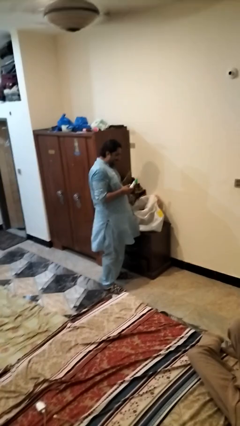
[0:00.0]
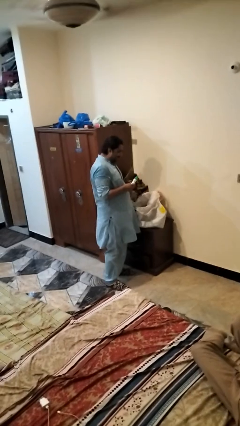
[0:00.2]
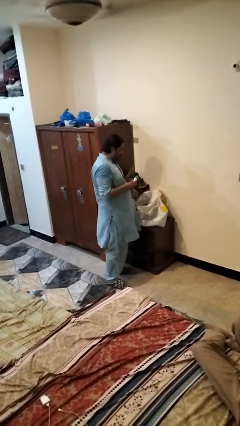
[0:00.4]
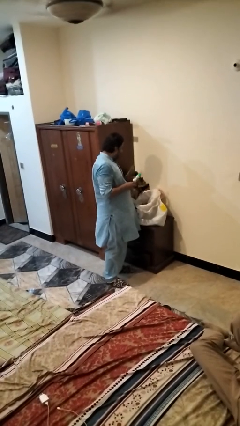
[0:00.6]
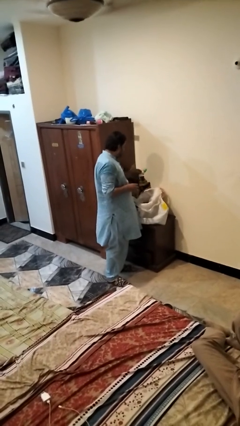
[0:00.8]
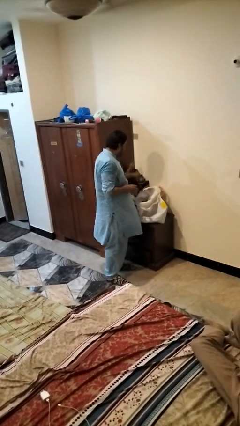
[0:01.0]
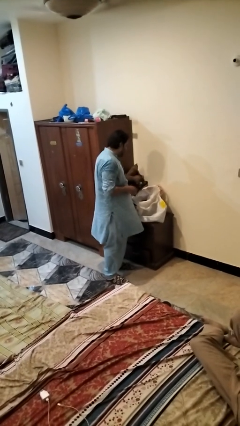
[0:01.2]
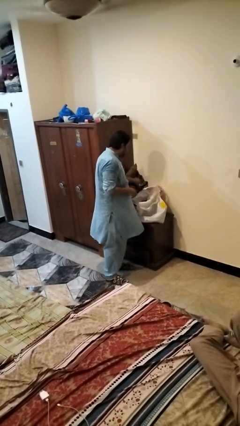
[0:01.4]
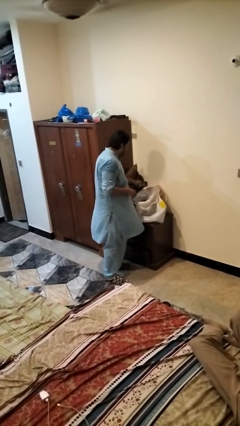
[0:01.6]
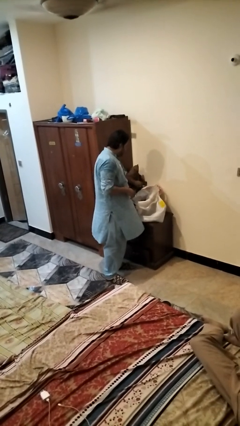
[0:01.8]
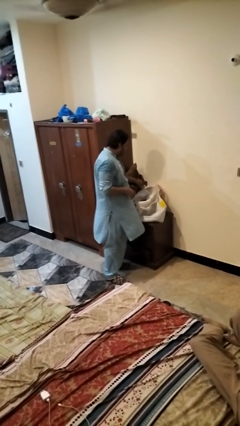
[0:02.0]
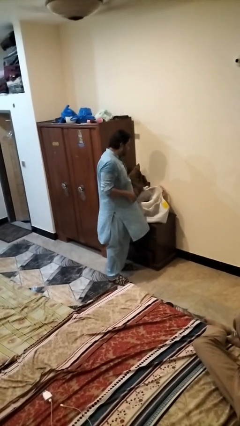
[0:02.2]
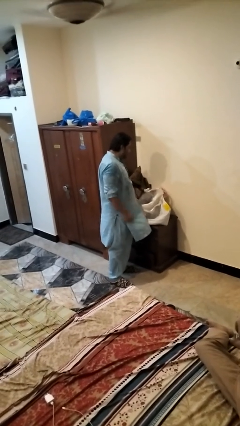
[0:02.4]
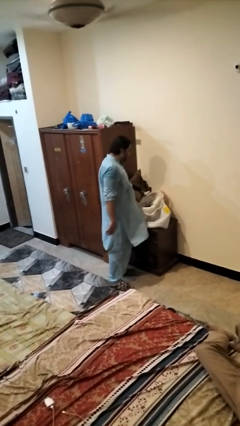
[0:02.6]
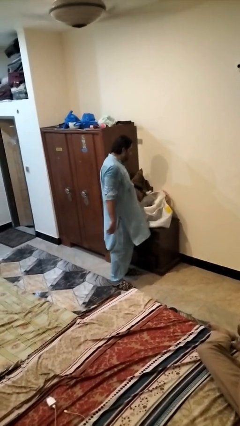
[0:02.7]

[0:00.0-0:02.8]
person puts object into bag

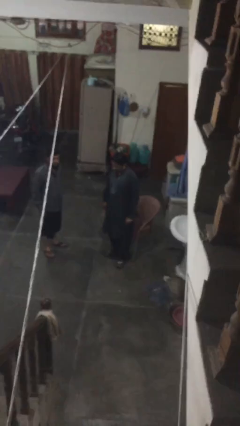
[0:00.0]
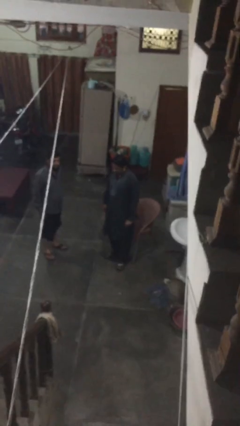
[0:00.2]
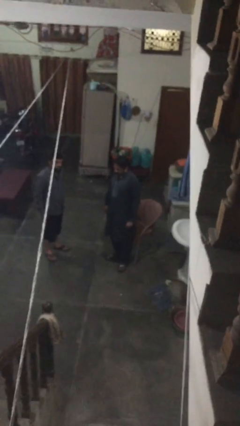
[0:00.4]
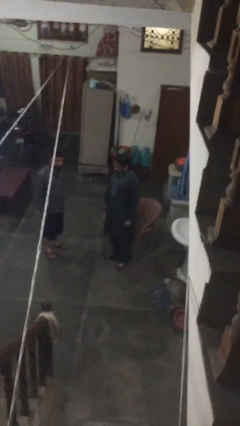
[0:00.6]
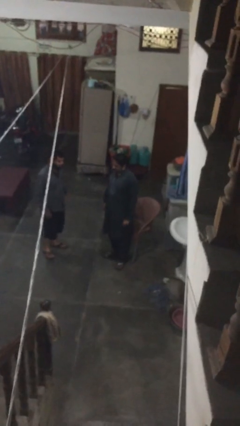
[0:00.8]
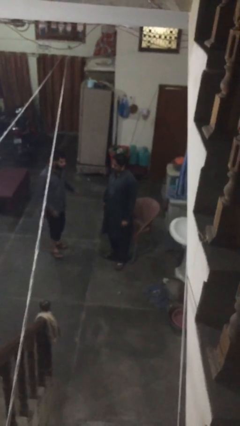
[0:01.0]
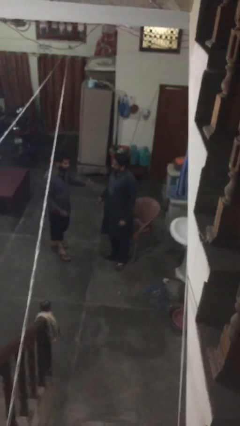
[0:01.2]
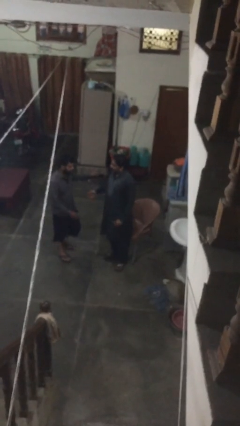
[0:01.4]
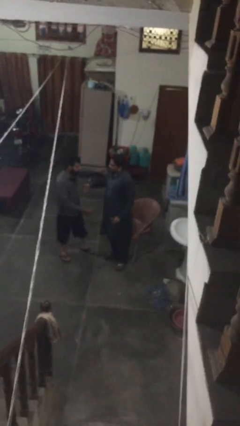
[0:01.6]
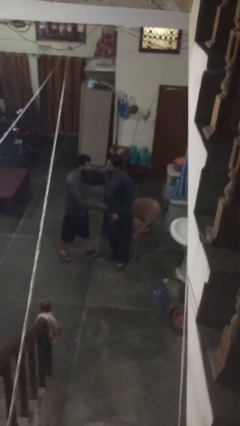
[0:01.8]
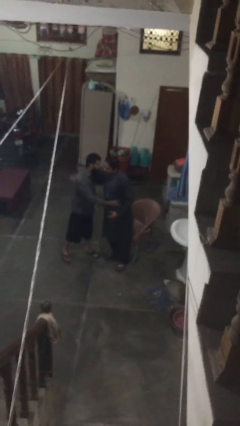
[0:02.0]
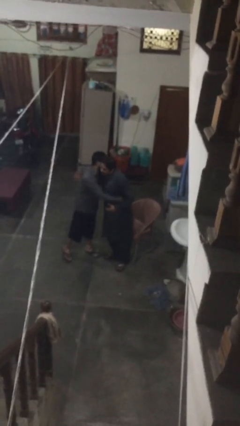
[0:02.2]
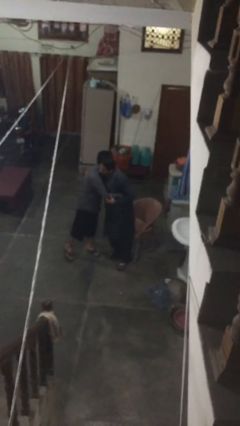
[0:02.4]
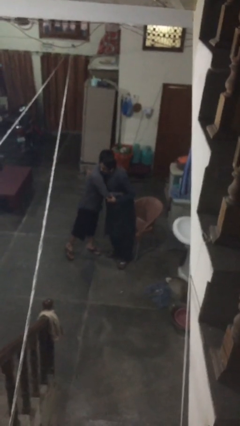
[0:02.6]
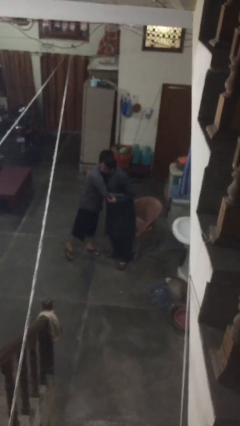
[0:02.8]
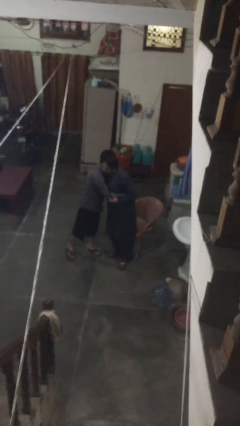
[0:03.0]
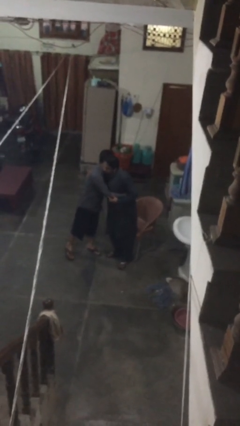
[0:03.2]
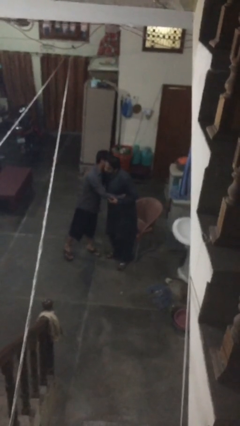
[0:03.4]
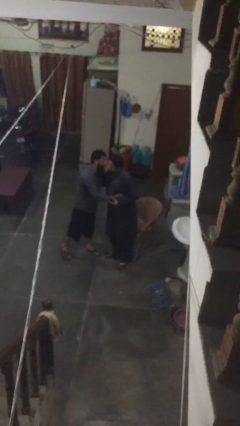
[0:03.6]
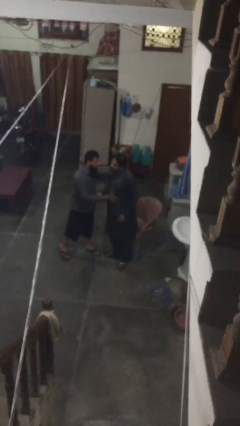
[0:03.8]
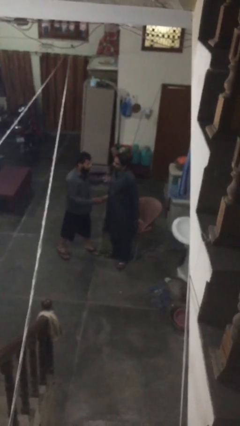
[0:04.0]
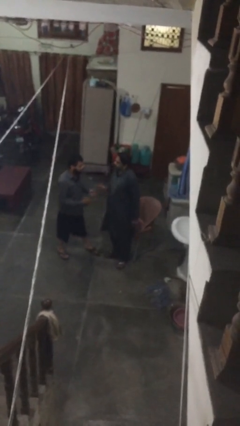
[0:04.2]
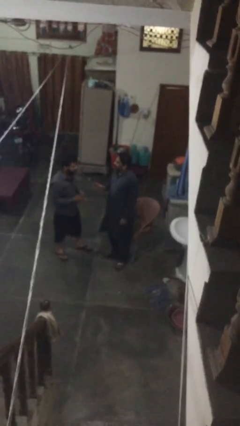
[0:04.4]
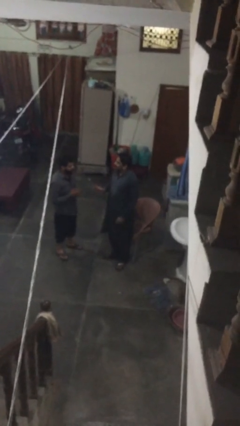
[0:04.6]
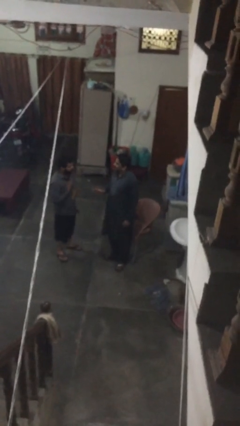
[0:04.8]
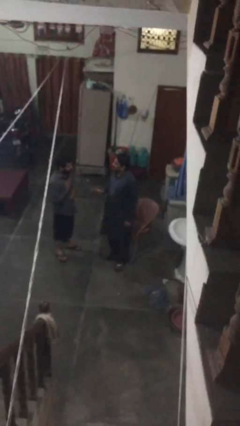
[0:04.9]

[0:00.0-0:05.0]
person embraces person

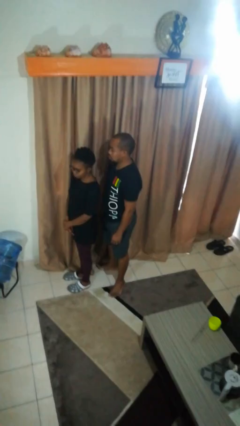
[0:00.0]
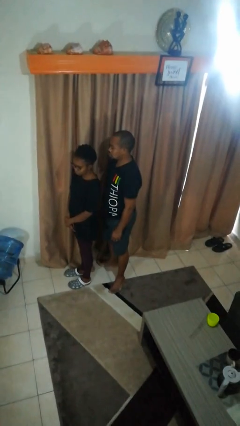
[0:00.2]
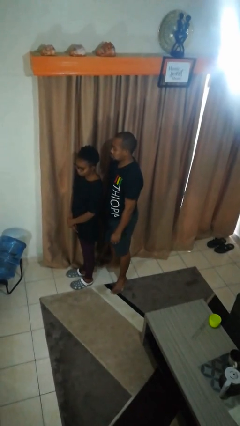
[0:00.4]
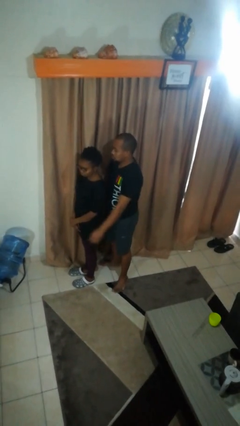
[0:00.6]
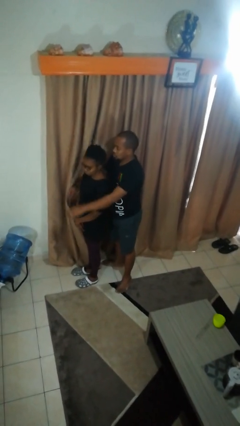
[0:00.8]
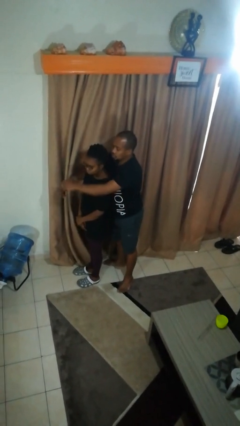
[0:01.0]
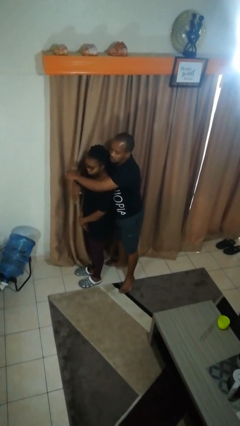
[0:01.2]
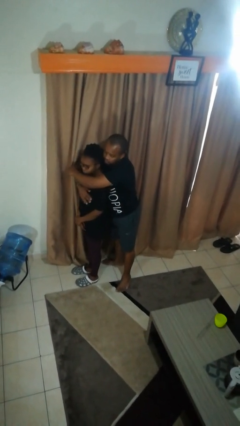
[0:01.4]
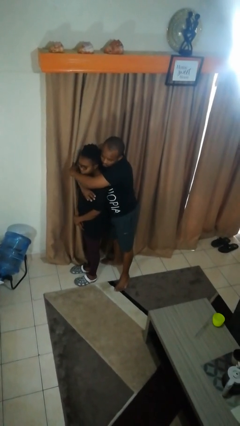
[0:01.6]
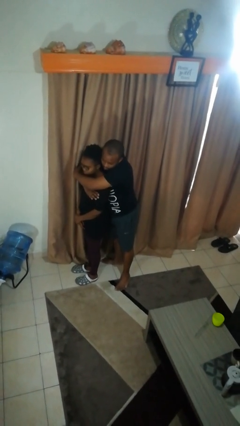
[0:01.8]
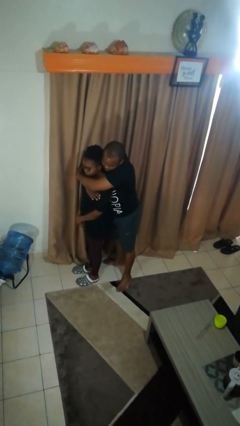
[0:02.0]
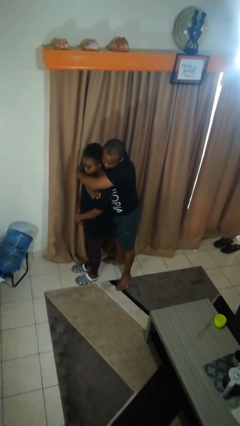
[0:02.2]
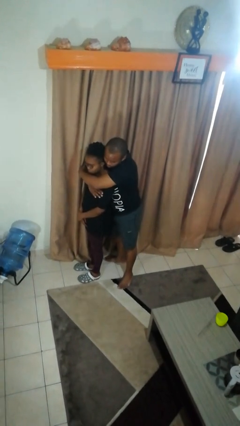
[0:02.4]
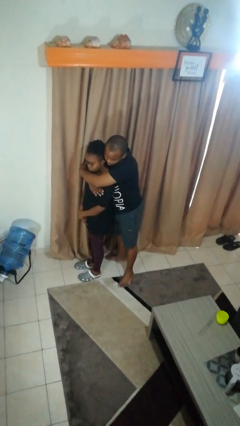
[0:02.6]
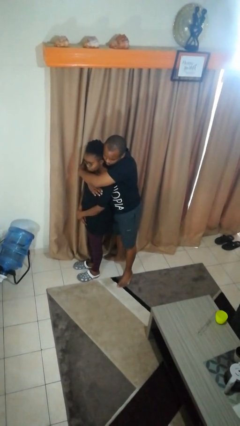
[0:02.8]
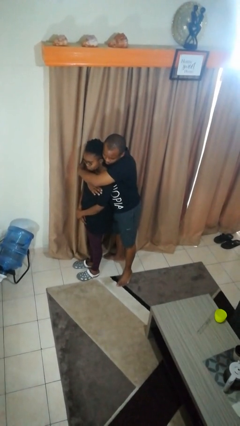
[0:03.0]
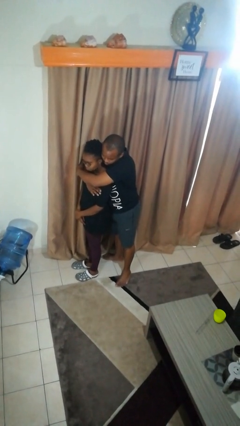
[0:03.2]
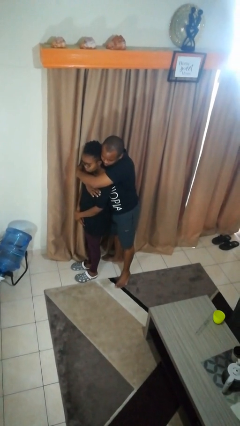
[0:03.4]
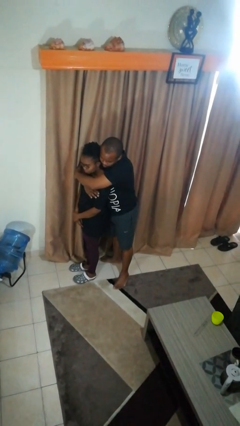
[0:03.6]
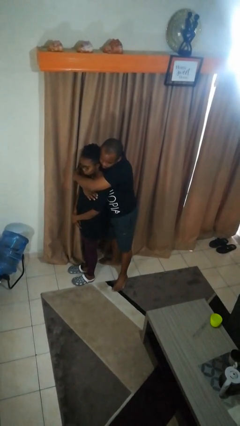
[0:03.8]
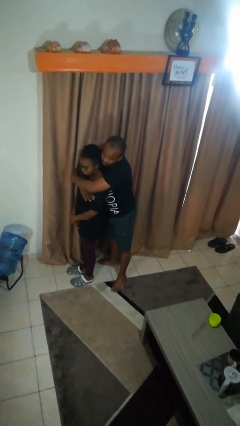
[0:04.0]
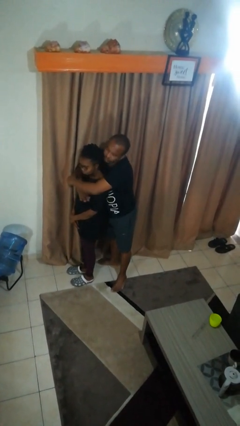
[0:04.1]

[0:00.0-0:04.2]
person hugs person from behind

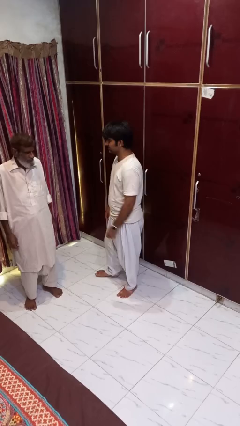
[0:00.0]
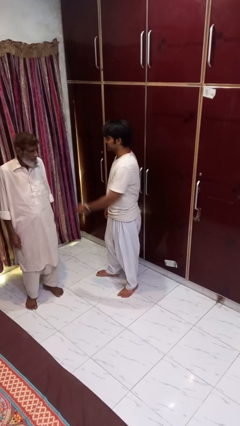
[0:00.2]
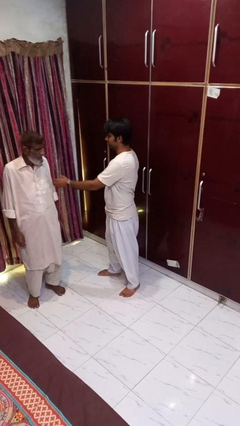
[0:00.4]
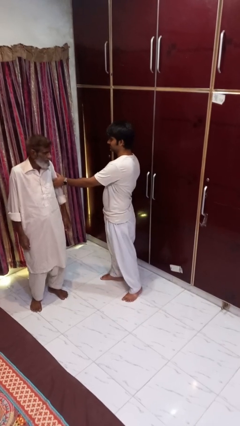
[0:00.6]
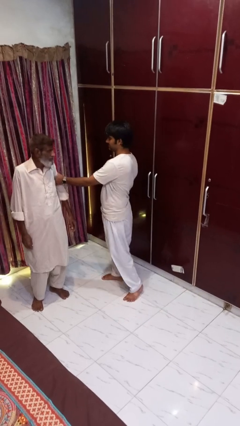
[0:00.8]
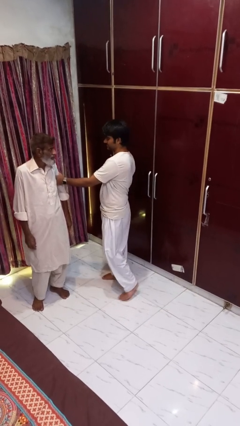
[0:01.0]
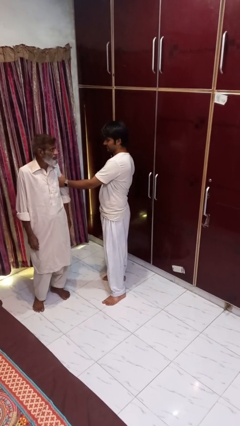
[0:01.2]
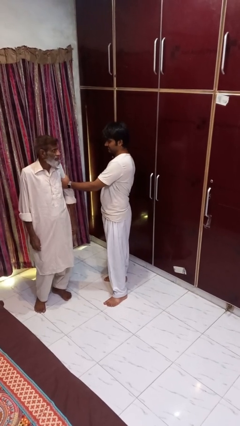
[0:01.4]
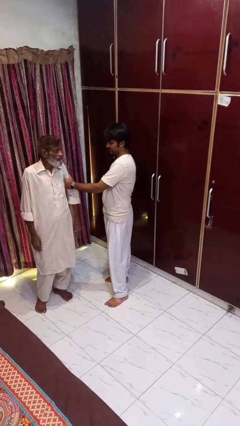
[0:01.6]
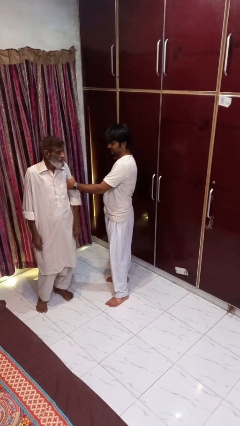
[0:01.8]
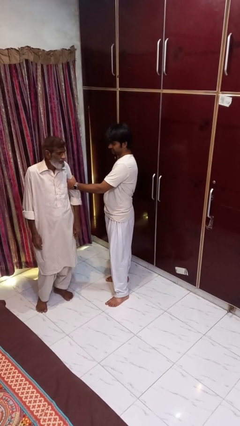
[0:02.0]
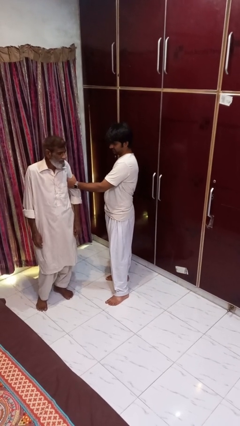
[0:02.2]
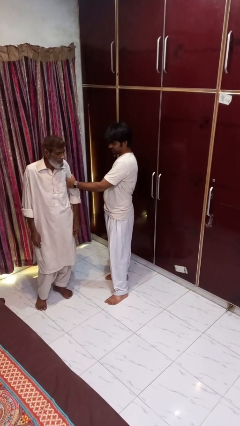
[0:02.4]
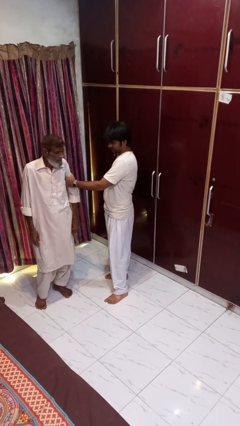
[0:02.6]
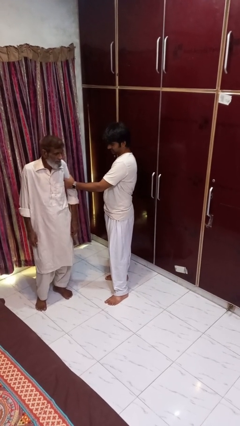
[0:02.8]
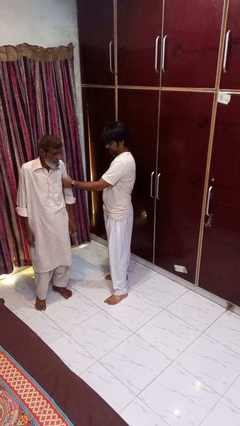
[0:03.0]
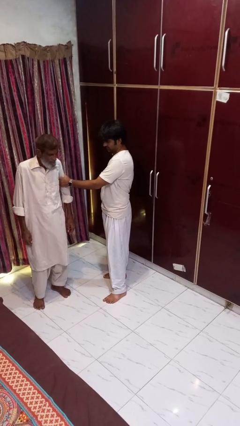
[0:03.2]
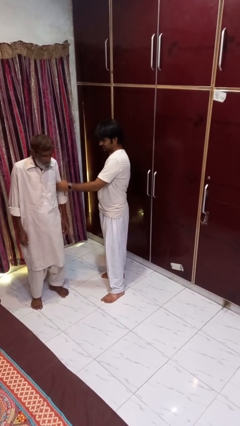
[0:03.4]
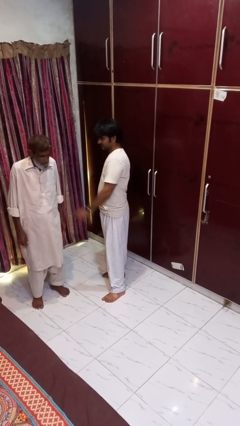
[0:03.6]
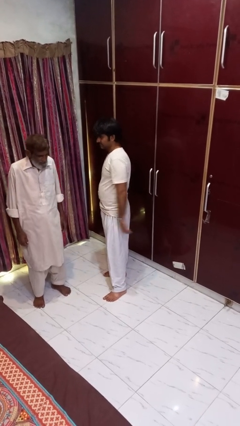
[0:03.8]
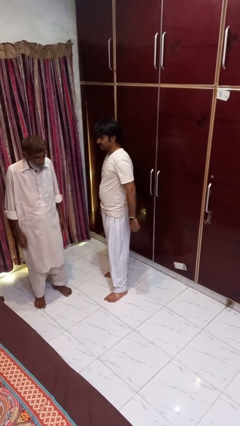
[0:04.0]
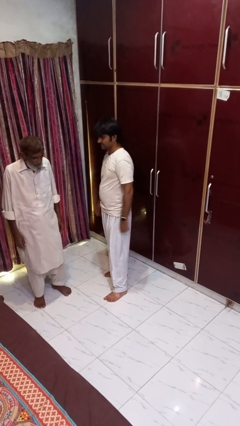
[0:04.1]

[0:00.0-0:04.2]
person grabs person by bicep

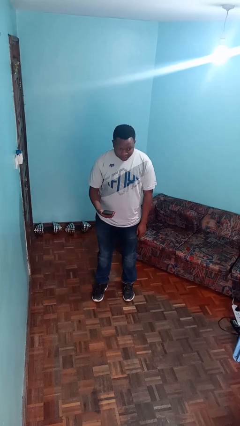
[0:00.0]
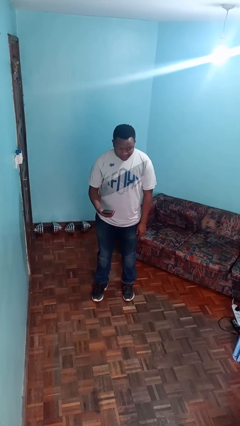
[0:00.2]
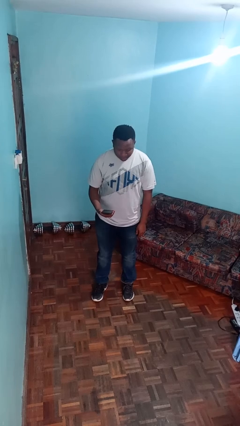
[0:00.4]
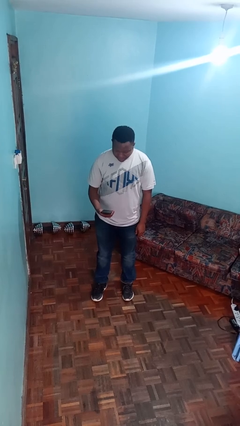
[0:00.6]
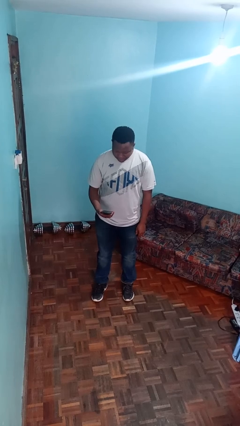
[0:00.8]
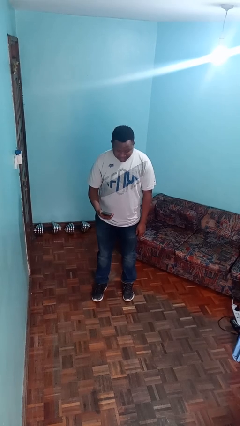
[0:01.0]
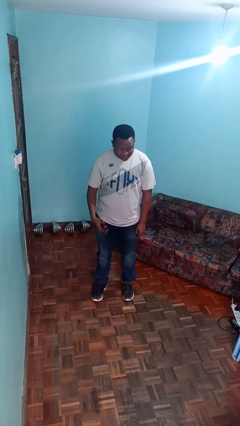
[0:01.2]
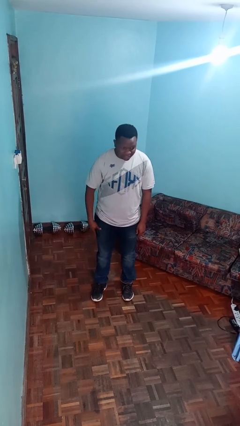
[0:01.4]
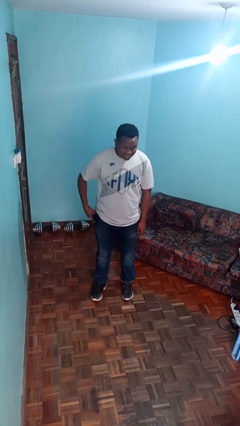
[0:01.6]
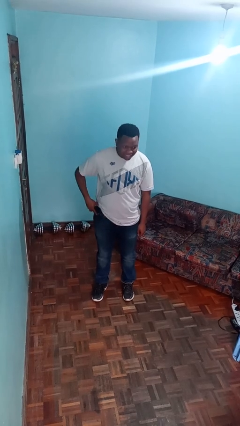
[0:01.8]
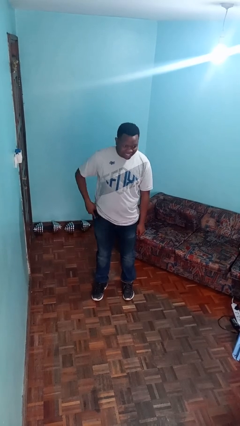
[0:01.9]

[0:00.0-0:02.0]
person puts phone into pocket
